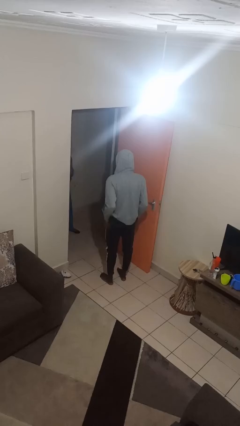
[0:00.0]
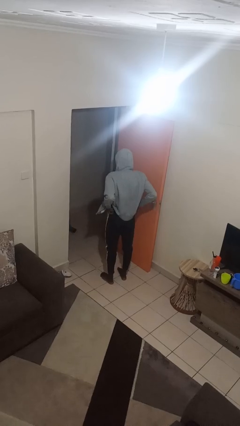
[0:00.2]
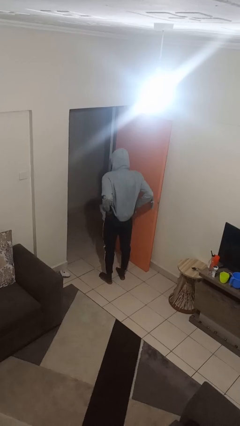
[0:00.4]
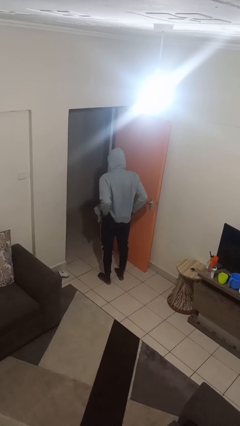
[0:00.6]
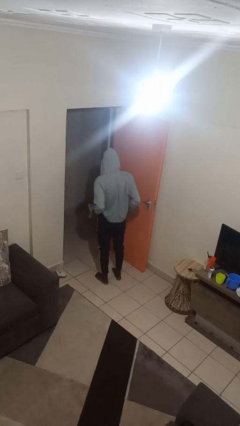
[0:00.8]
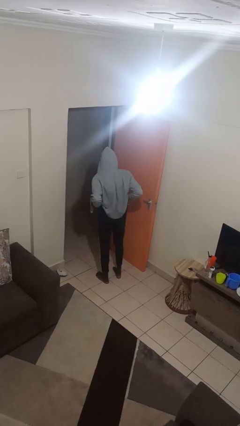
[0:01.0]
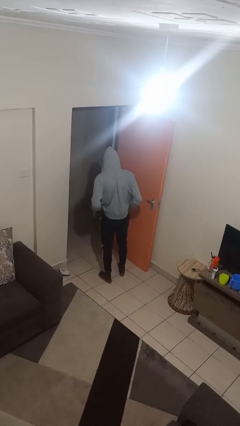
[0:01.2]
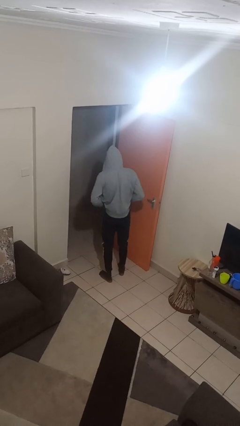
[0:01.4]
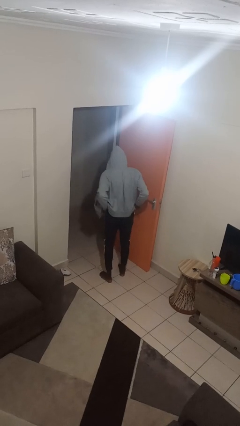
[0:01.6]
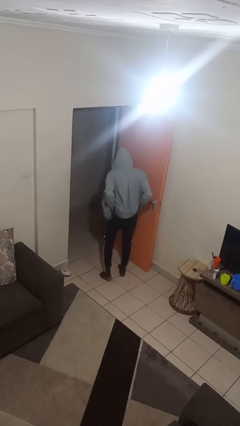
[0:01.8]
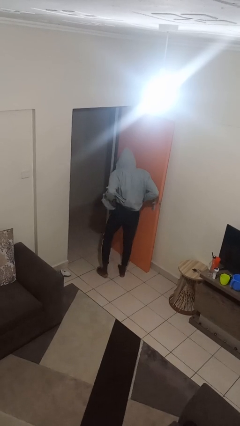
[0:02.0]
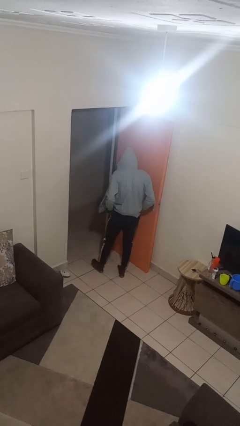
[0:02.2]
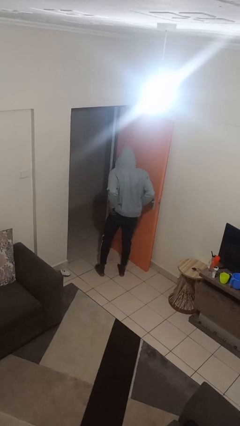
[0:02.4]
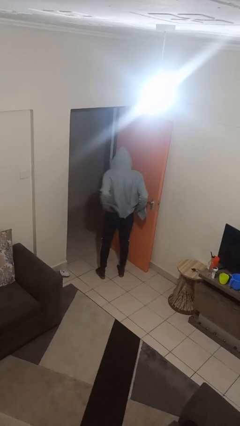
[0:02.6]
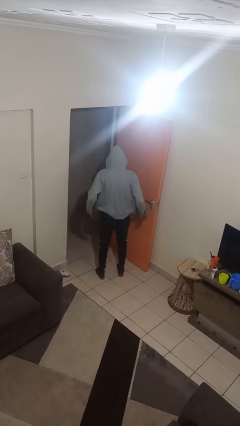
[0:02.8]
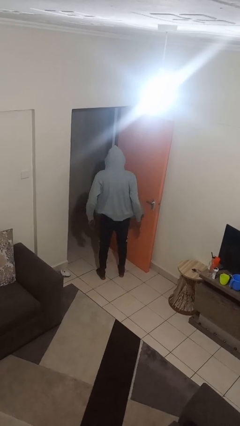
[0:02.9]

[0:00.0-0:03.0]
person hikes up pants

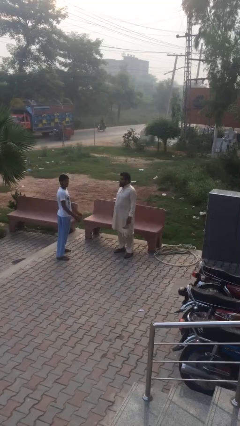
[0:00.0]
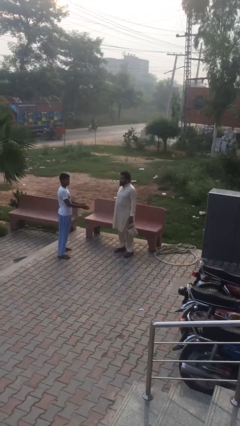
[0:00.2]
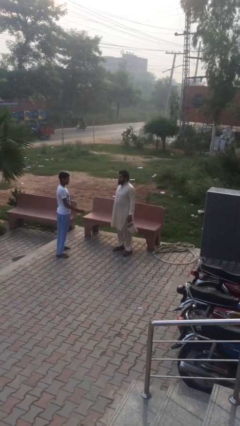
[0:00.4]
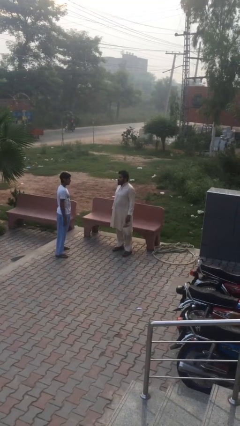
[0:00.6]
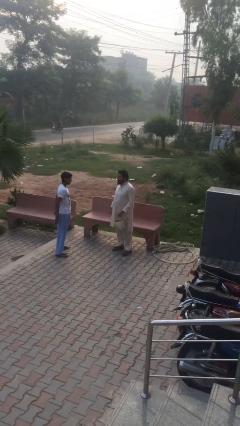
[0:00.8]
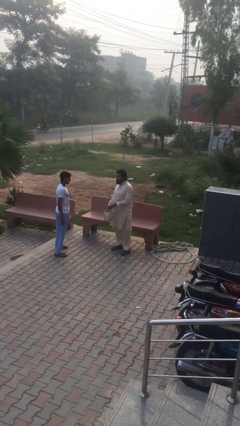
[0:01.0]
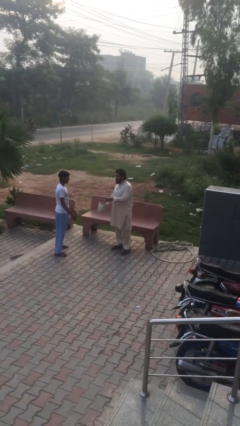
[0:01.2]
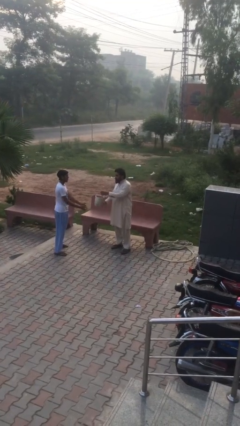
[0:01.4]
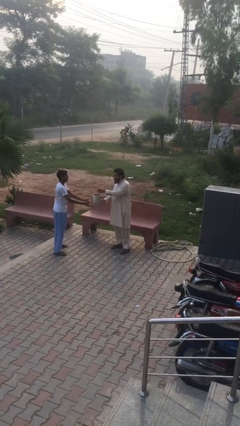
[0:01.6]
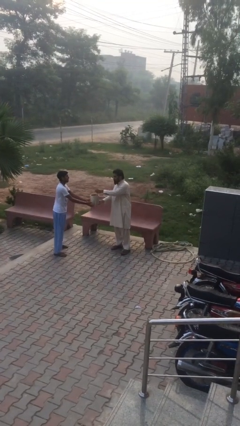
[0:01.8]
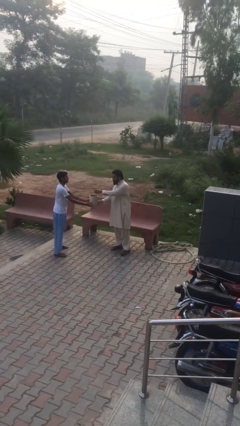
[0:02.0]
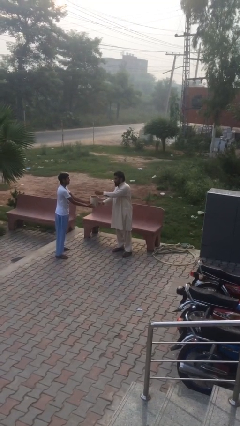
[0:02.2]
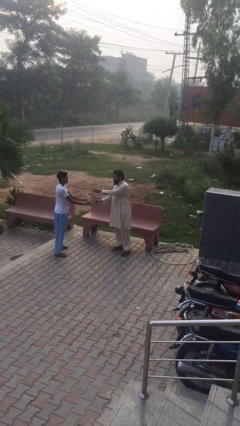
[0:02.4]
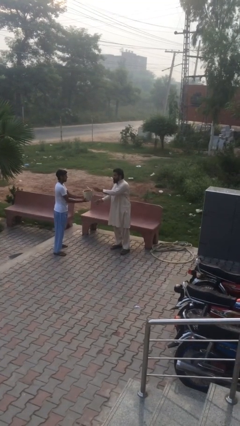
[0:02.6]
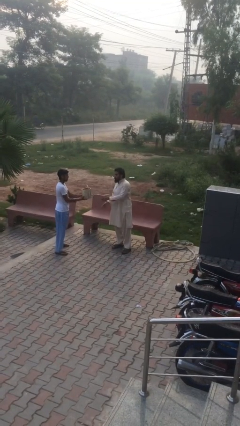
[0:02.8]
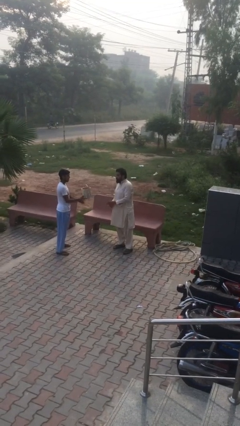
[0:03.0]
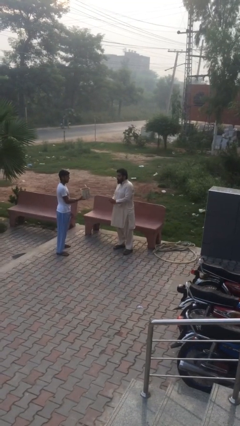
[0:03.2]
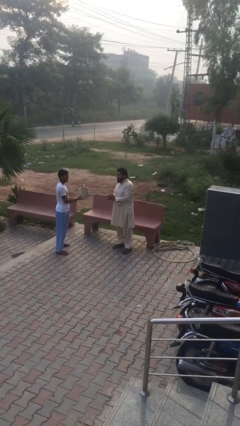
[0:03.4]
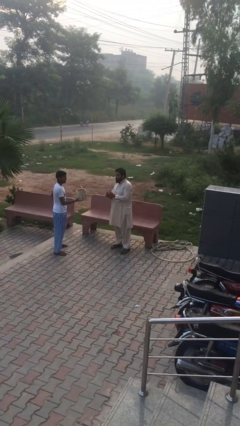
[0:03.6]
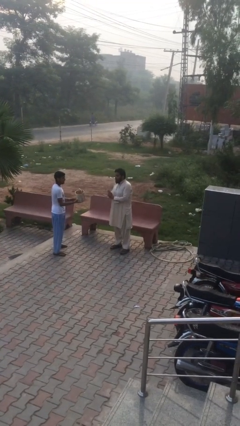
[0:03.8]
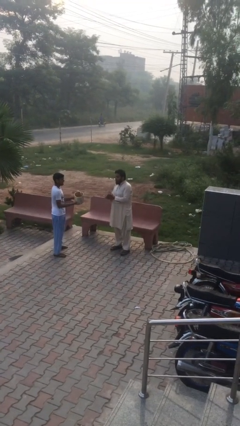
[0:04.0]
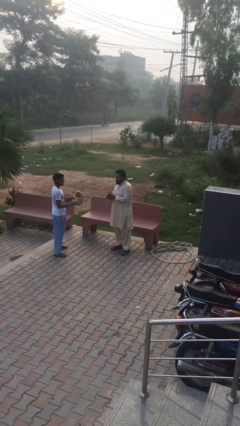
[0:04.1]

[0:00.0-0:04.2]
person transfers object to person

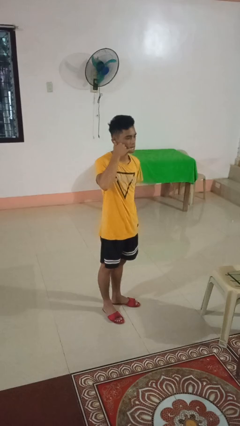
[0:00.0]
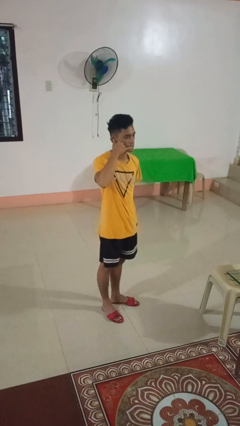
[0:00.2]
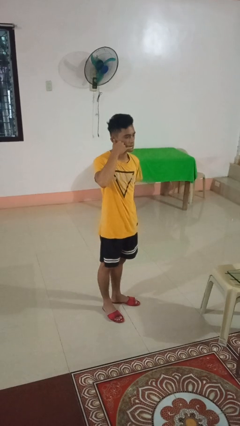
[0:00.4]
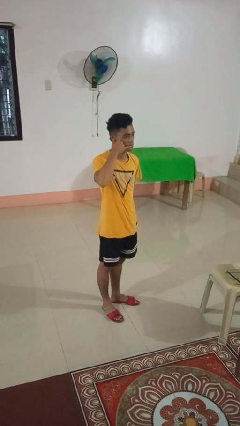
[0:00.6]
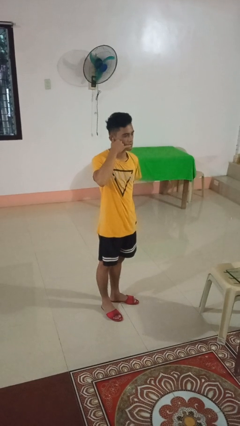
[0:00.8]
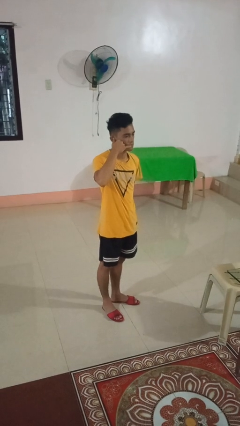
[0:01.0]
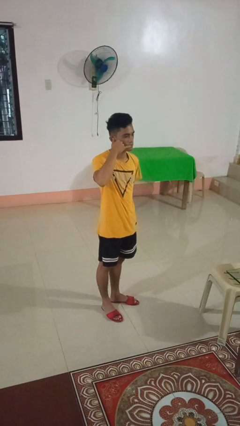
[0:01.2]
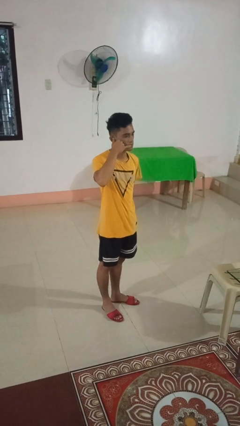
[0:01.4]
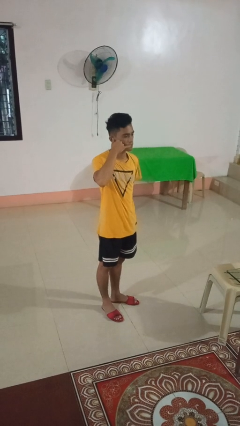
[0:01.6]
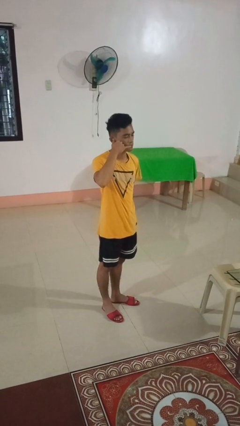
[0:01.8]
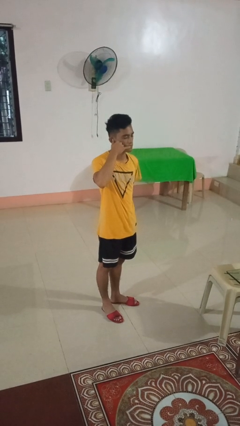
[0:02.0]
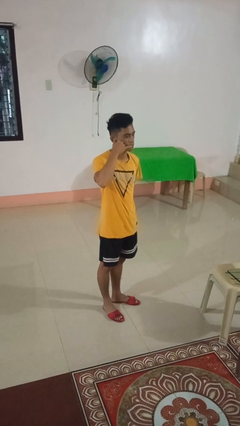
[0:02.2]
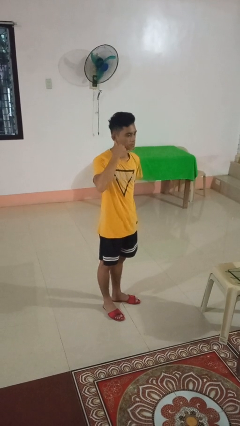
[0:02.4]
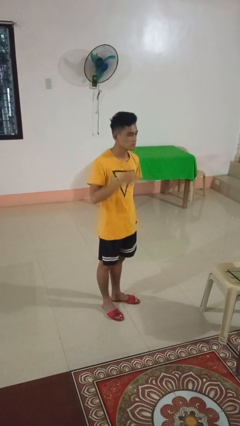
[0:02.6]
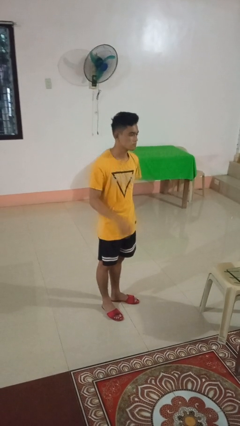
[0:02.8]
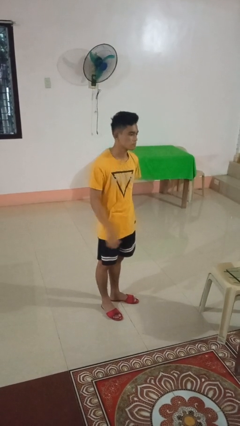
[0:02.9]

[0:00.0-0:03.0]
person gestures call me

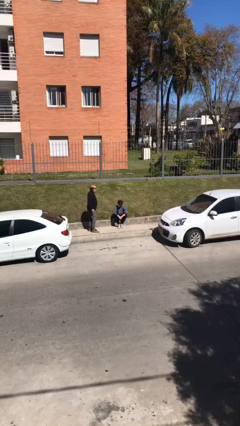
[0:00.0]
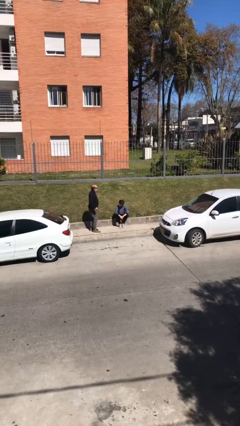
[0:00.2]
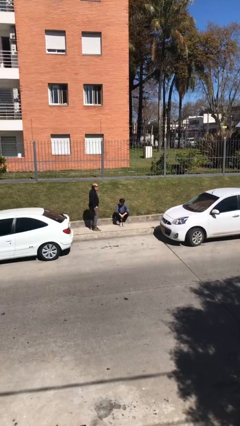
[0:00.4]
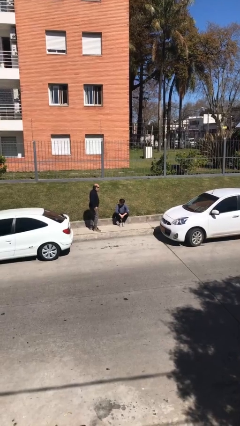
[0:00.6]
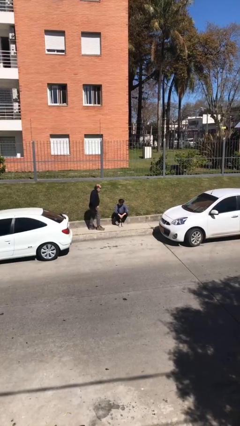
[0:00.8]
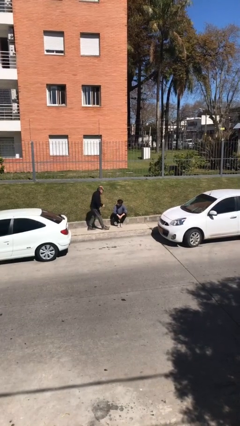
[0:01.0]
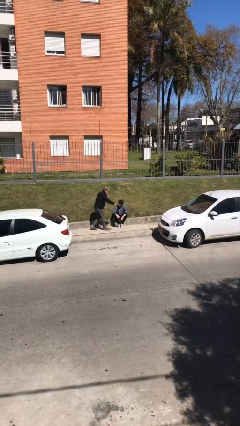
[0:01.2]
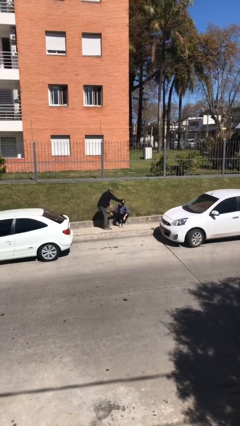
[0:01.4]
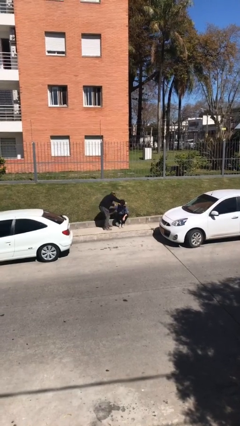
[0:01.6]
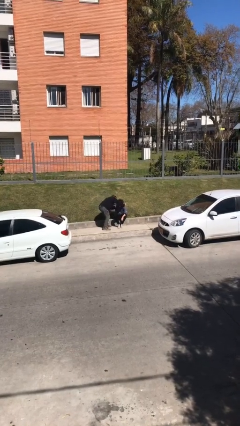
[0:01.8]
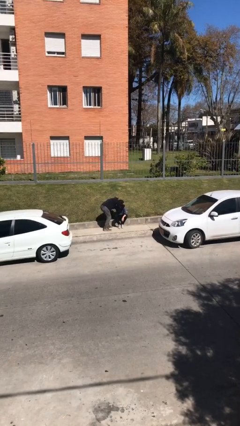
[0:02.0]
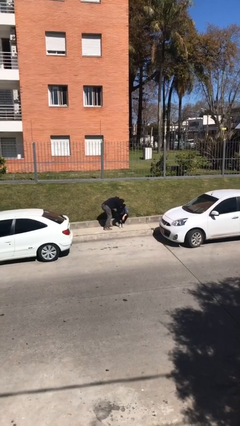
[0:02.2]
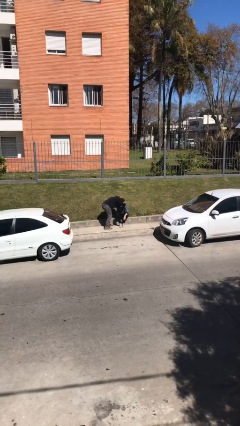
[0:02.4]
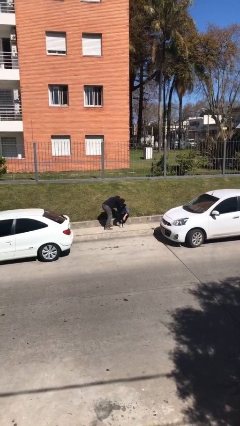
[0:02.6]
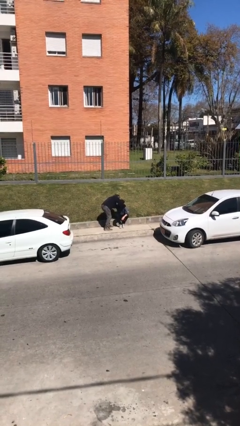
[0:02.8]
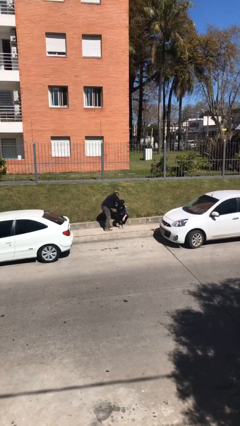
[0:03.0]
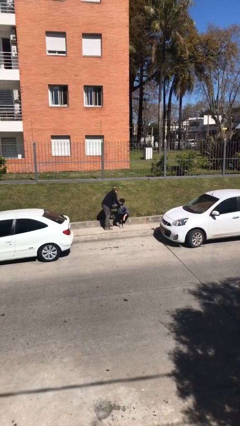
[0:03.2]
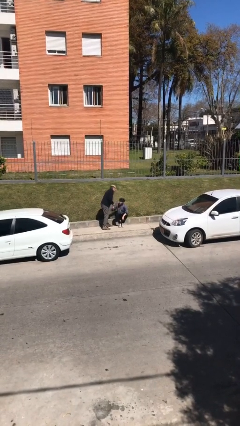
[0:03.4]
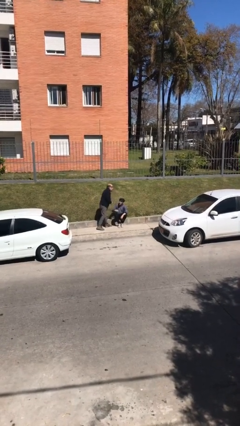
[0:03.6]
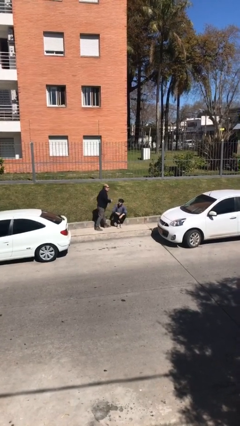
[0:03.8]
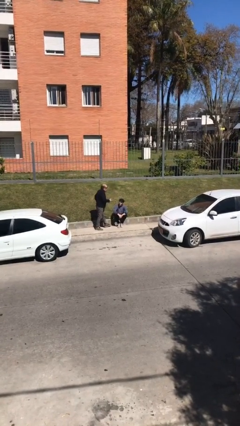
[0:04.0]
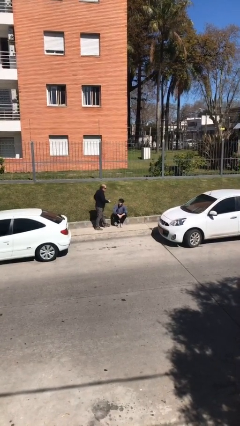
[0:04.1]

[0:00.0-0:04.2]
person embraces person

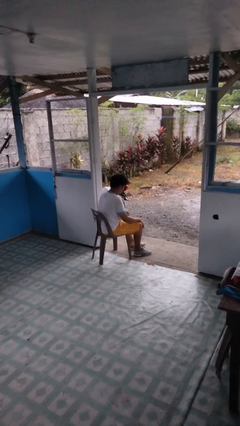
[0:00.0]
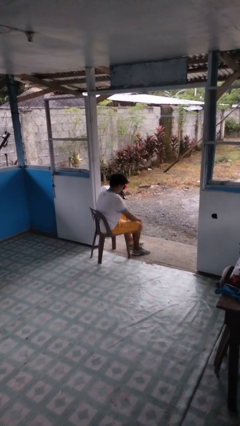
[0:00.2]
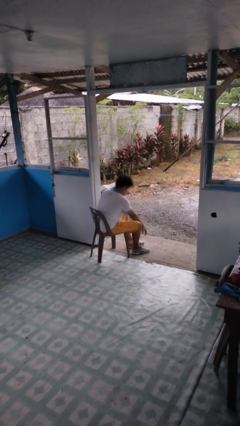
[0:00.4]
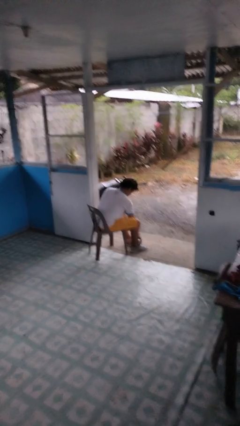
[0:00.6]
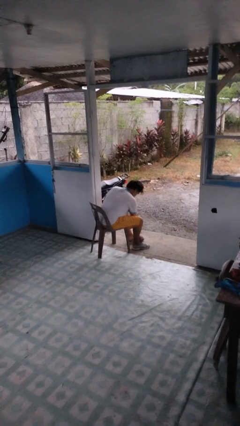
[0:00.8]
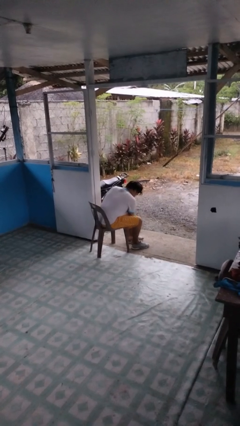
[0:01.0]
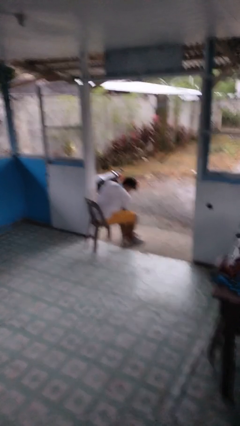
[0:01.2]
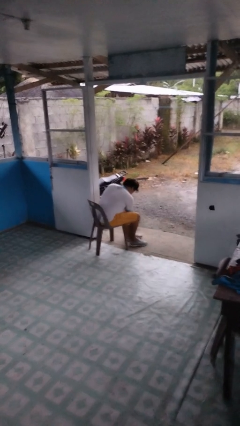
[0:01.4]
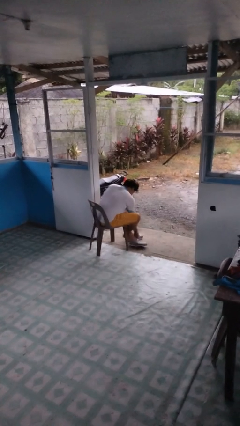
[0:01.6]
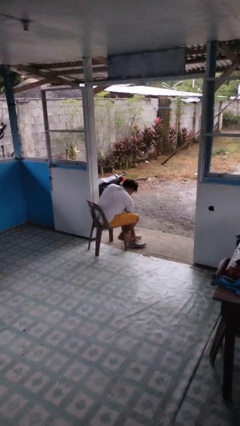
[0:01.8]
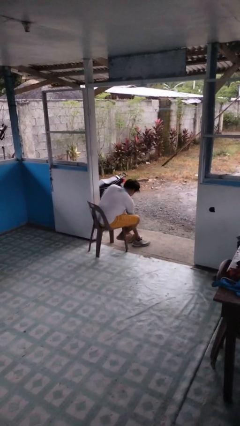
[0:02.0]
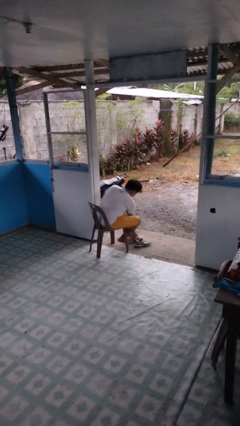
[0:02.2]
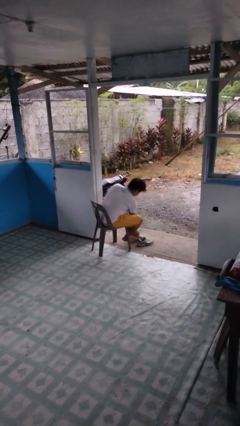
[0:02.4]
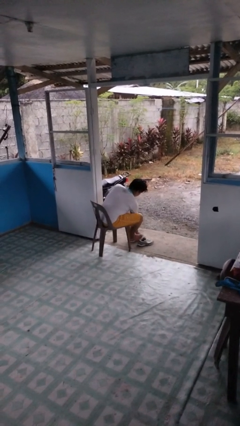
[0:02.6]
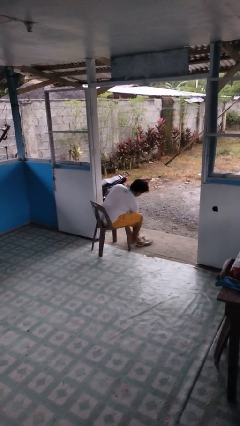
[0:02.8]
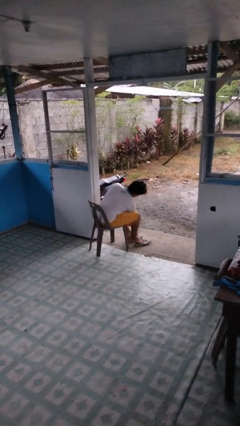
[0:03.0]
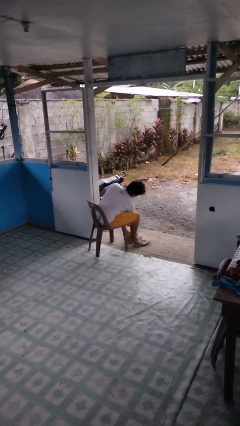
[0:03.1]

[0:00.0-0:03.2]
person takes off shoes
